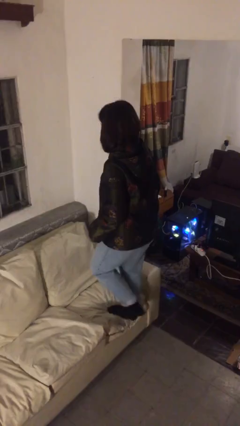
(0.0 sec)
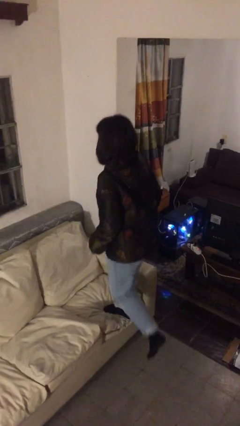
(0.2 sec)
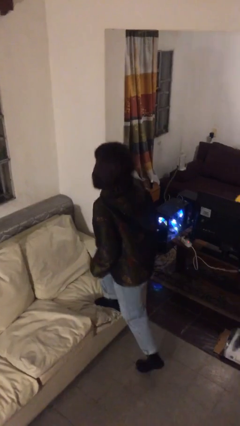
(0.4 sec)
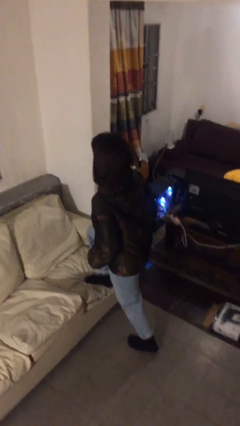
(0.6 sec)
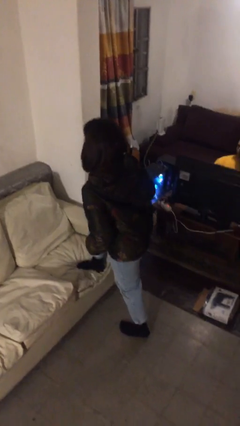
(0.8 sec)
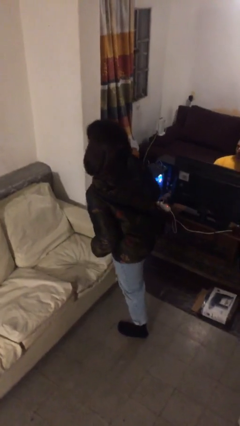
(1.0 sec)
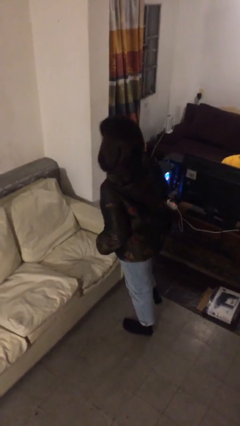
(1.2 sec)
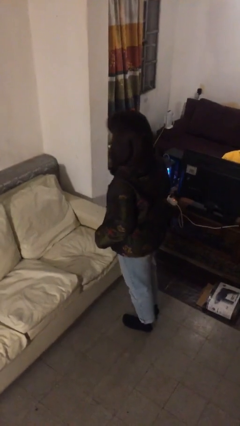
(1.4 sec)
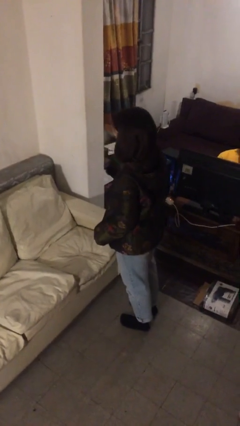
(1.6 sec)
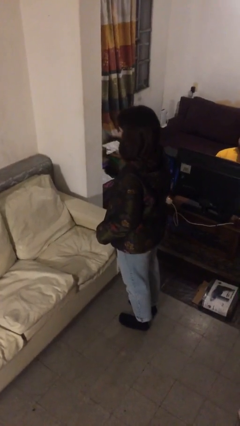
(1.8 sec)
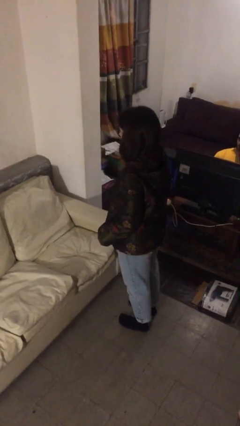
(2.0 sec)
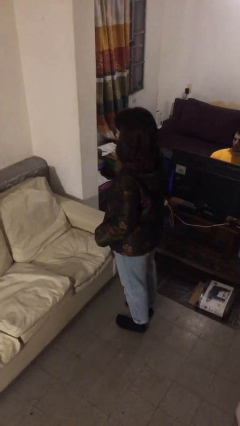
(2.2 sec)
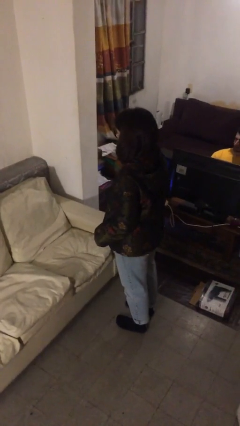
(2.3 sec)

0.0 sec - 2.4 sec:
person climbs off couch

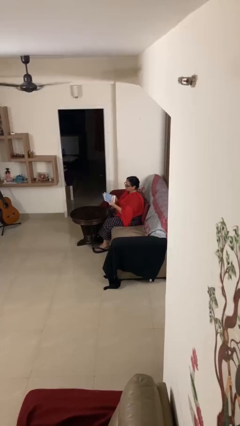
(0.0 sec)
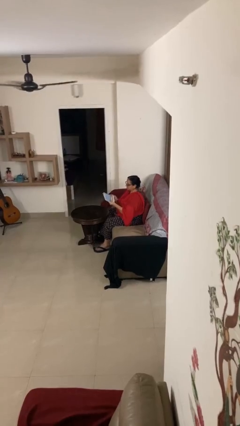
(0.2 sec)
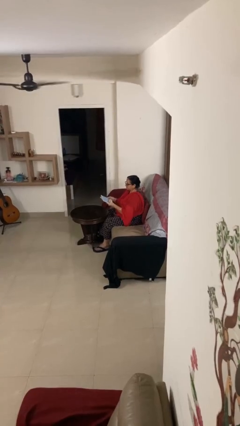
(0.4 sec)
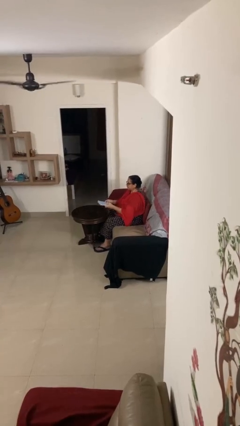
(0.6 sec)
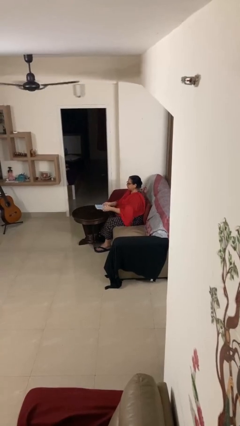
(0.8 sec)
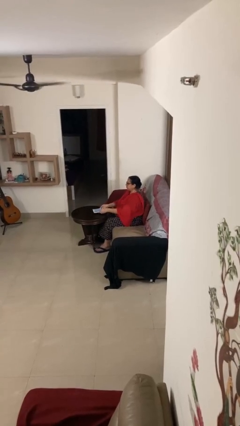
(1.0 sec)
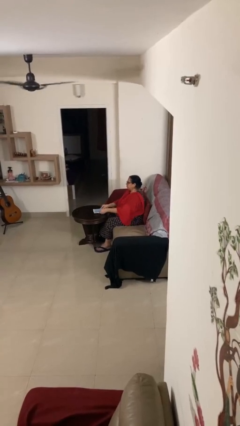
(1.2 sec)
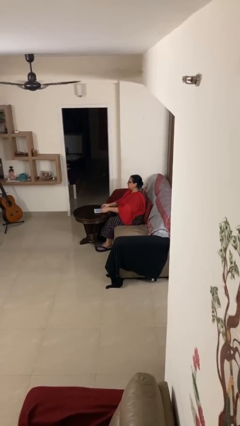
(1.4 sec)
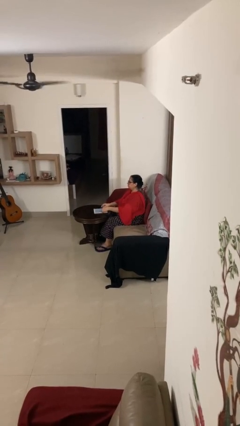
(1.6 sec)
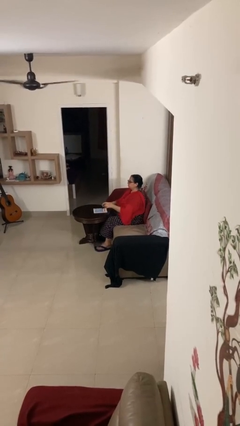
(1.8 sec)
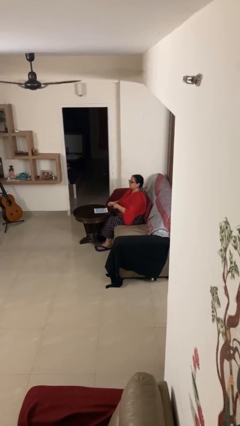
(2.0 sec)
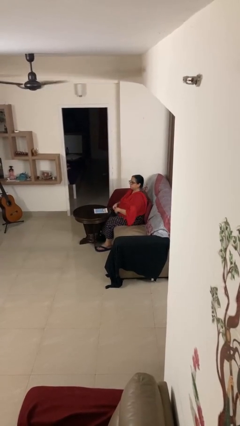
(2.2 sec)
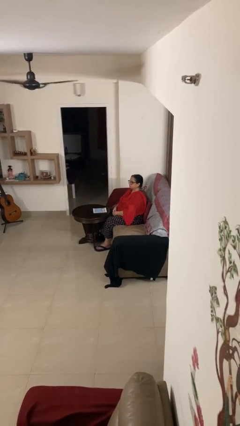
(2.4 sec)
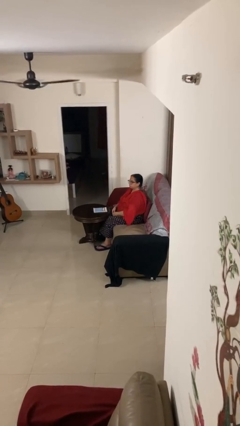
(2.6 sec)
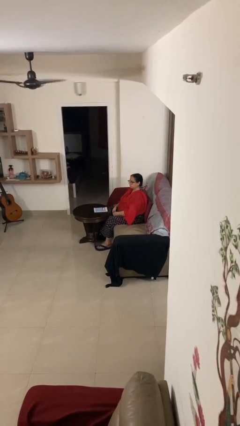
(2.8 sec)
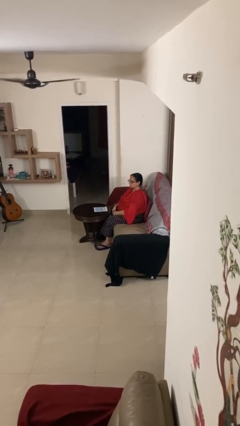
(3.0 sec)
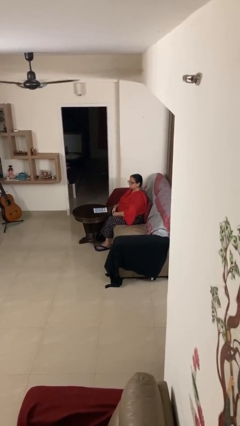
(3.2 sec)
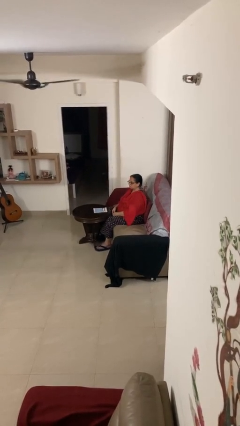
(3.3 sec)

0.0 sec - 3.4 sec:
person puts down object on table

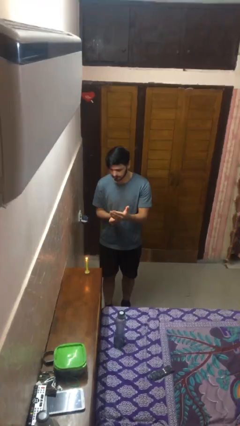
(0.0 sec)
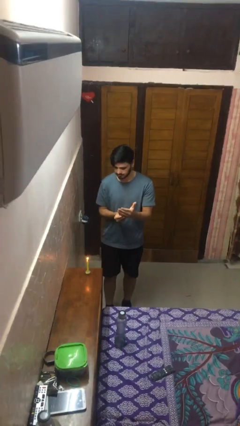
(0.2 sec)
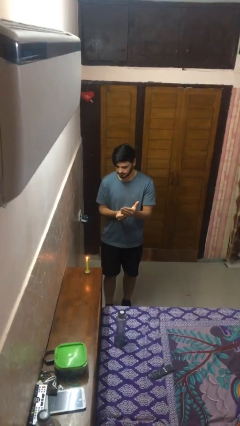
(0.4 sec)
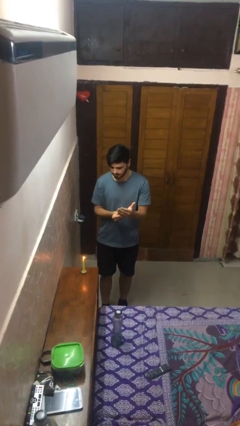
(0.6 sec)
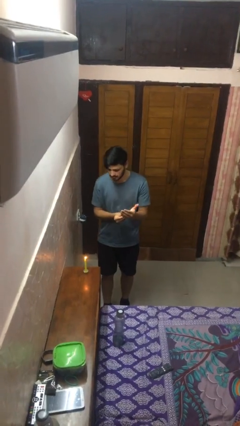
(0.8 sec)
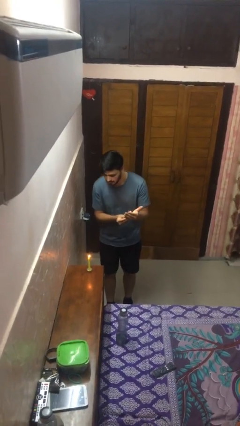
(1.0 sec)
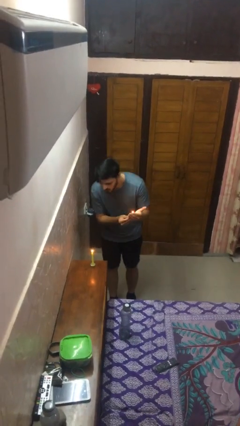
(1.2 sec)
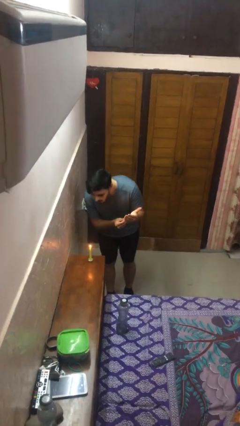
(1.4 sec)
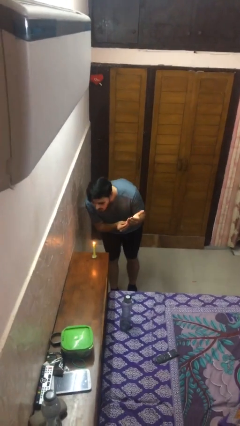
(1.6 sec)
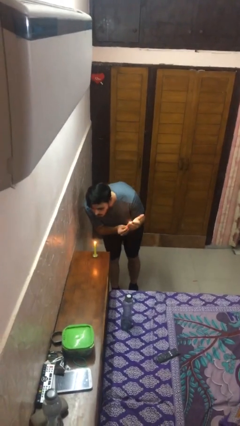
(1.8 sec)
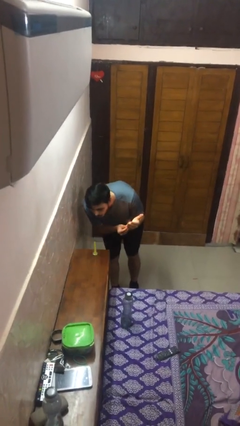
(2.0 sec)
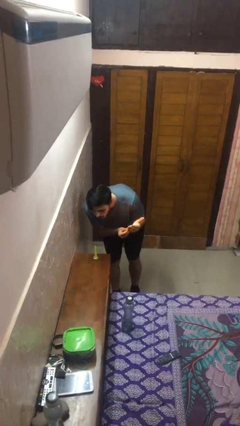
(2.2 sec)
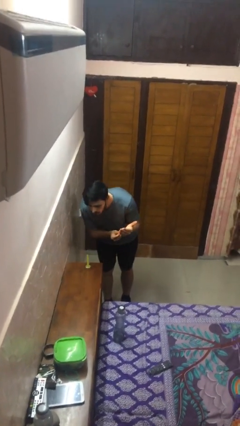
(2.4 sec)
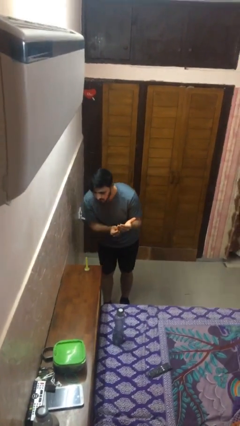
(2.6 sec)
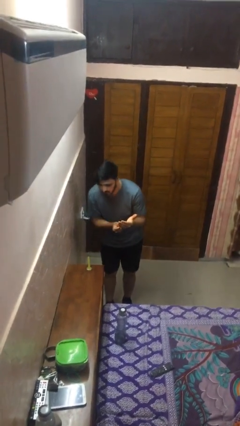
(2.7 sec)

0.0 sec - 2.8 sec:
person extinguishes candle

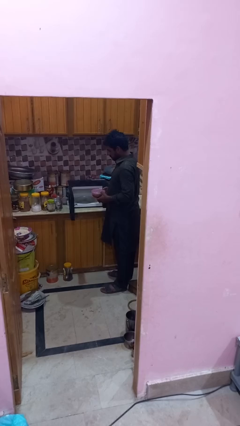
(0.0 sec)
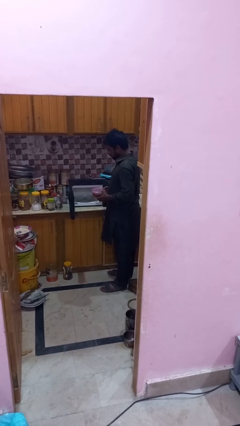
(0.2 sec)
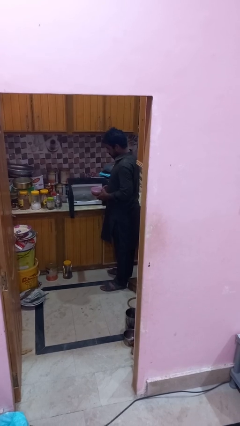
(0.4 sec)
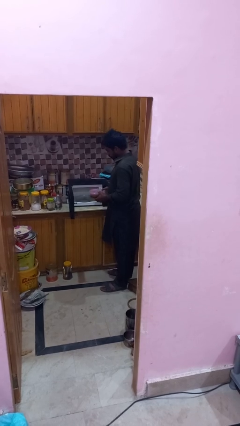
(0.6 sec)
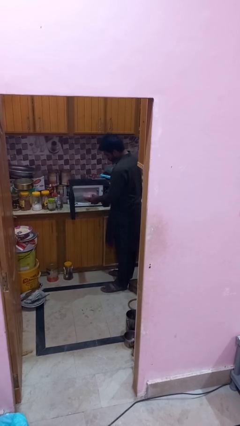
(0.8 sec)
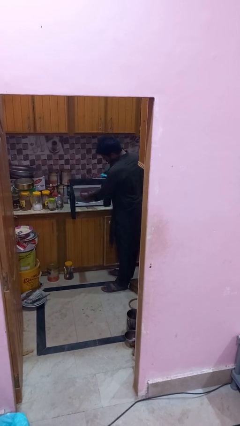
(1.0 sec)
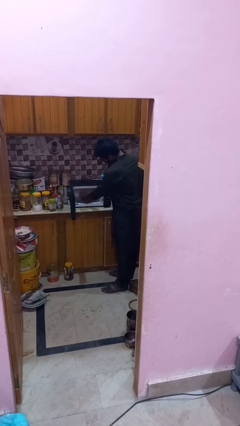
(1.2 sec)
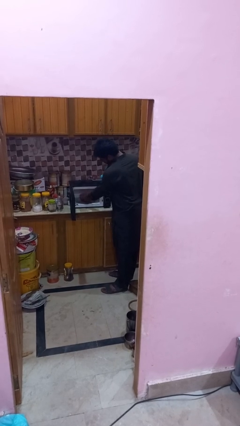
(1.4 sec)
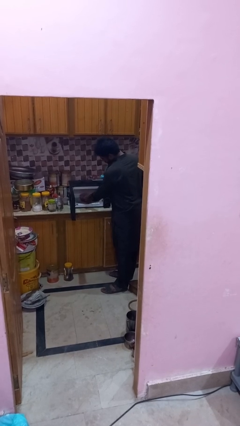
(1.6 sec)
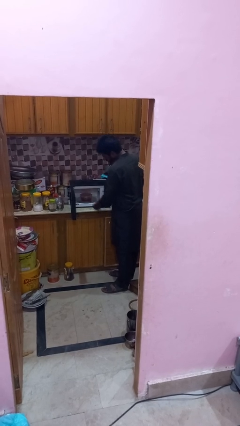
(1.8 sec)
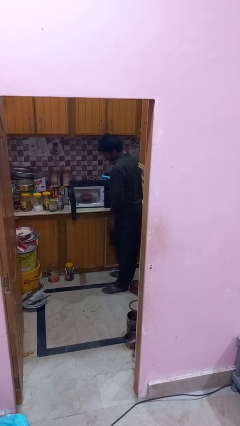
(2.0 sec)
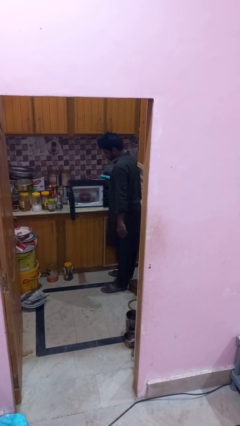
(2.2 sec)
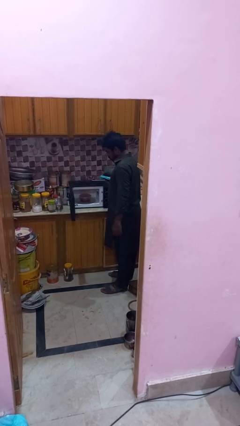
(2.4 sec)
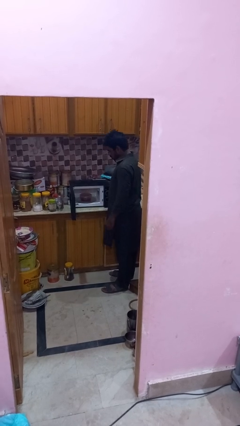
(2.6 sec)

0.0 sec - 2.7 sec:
person puts object into microwave

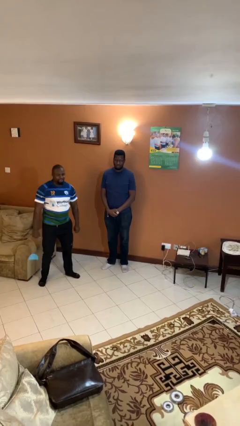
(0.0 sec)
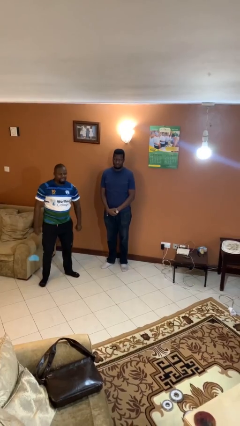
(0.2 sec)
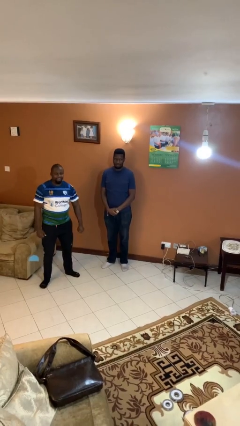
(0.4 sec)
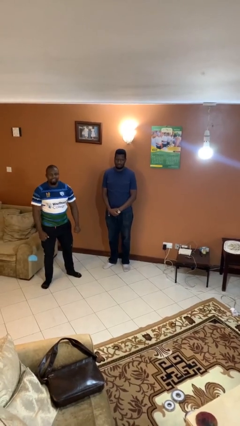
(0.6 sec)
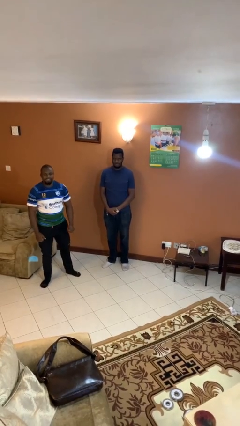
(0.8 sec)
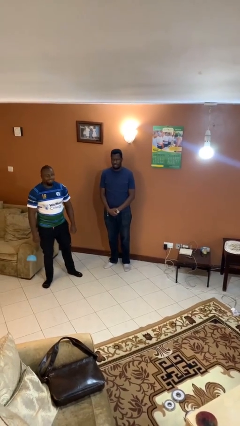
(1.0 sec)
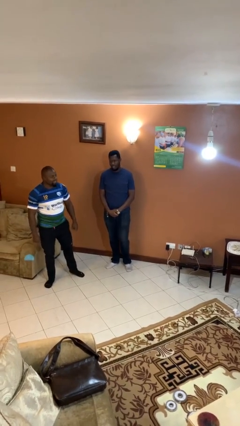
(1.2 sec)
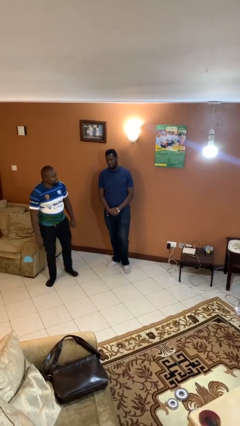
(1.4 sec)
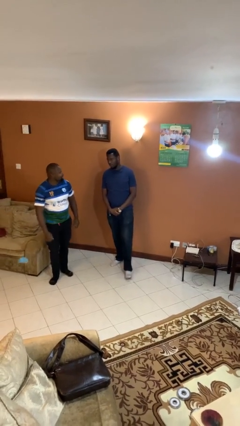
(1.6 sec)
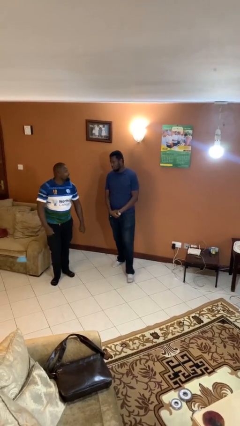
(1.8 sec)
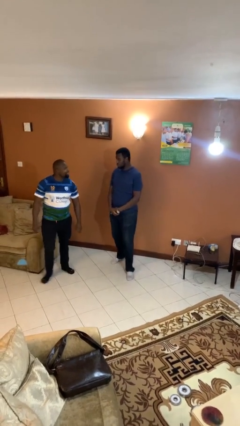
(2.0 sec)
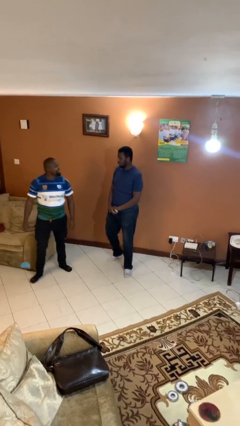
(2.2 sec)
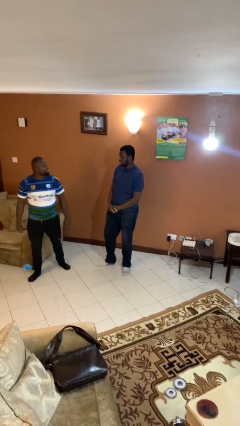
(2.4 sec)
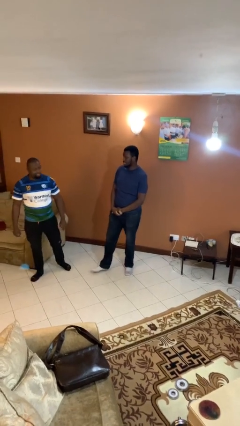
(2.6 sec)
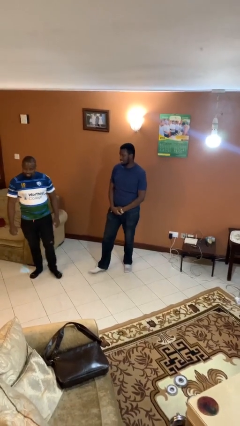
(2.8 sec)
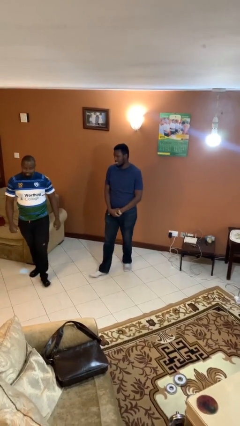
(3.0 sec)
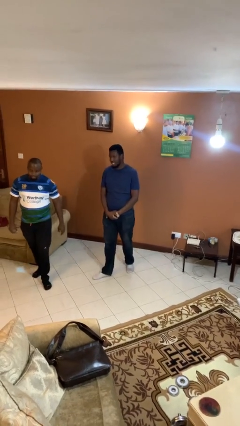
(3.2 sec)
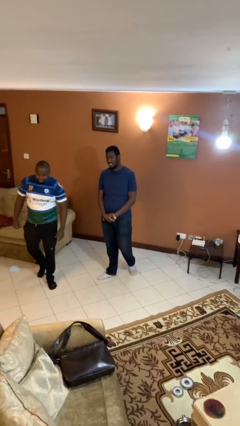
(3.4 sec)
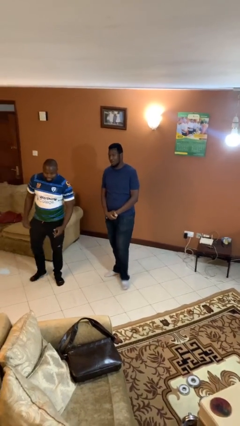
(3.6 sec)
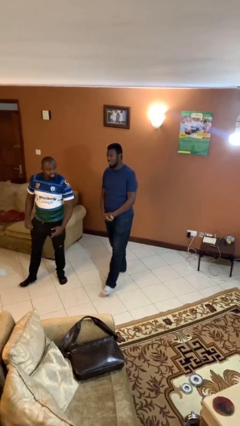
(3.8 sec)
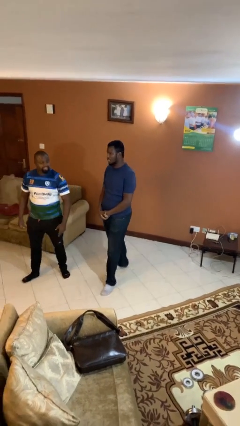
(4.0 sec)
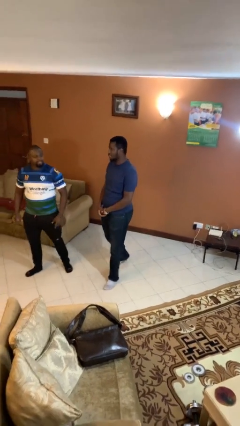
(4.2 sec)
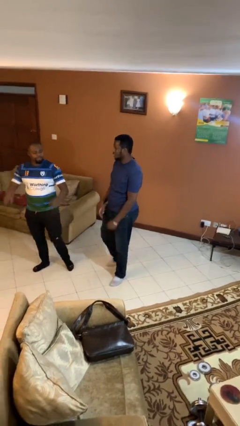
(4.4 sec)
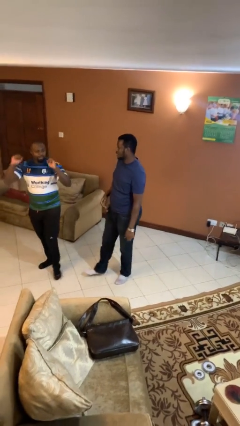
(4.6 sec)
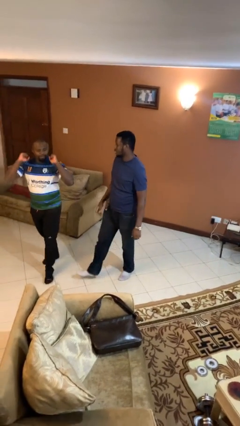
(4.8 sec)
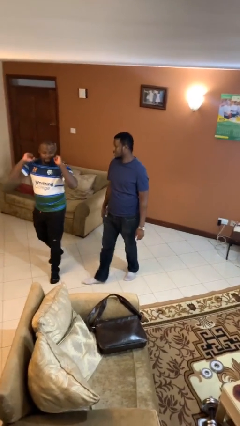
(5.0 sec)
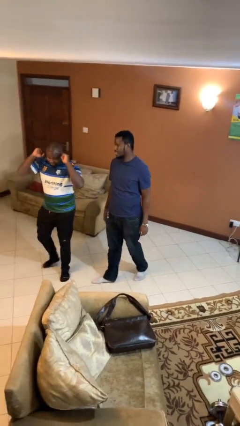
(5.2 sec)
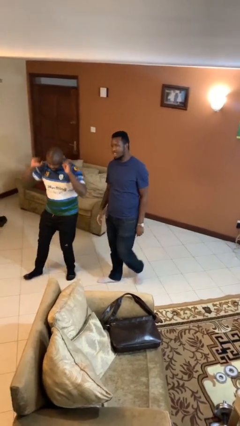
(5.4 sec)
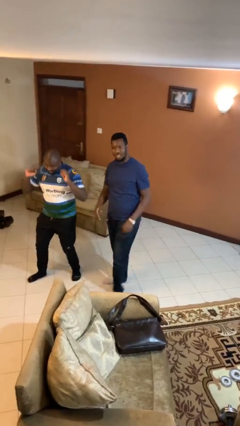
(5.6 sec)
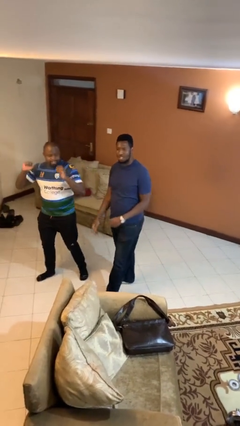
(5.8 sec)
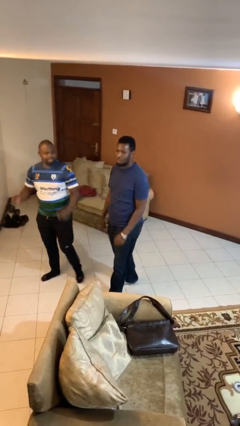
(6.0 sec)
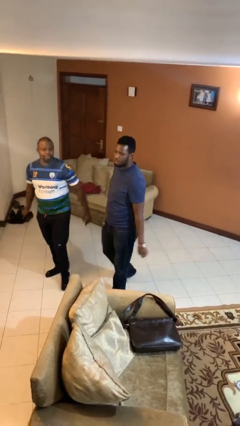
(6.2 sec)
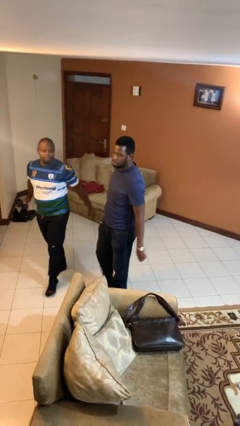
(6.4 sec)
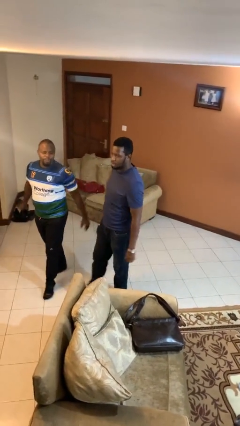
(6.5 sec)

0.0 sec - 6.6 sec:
person talks to person
